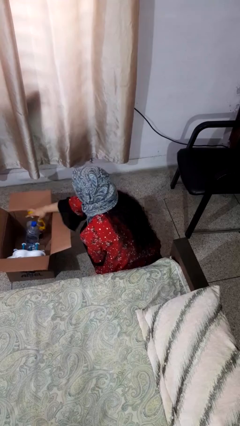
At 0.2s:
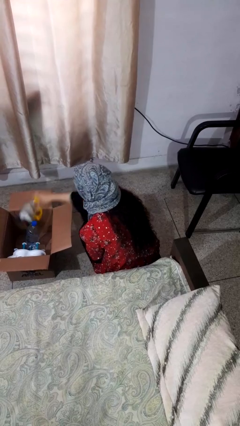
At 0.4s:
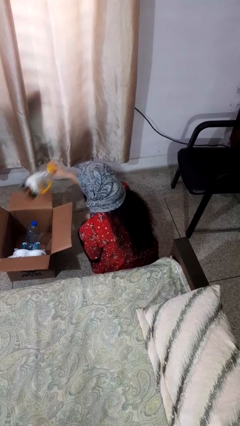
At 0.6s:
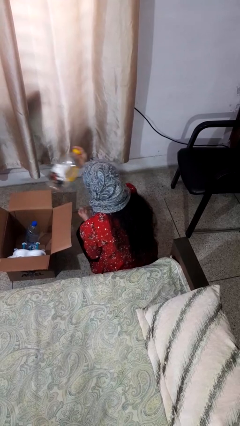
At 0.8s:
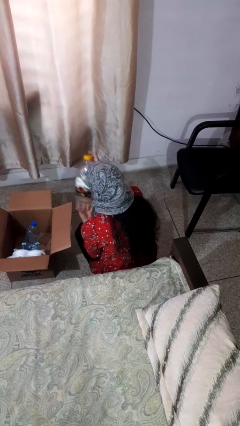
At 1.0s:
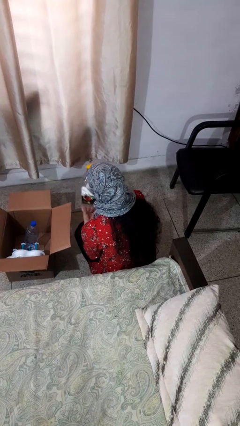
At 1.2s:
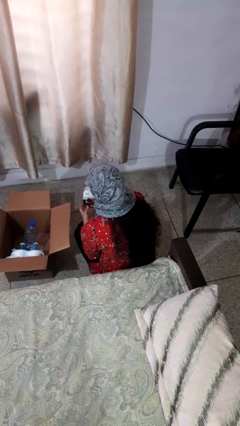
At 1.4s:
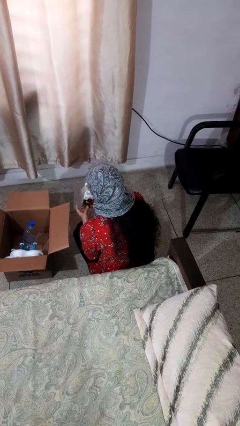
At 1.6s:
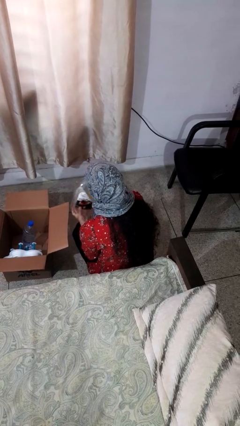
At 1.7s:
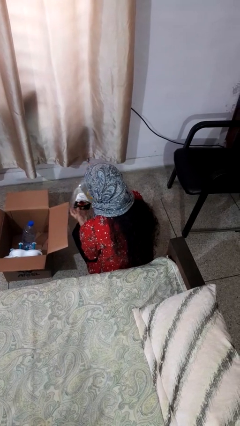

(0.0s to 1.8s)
person takes object from box

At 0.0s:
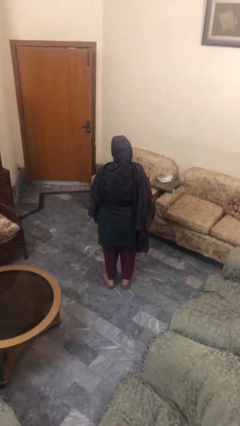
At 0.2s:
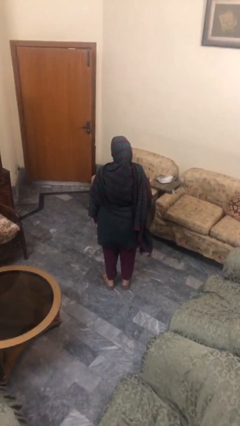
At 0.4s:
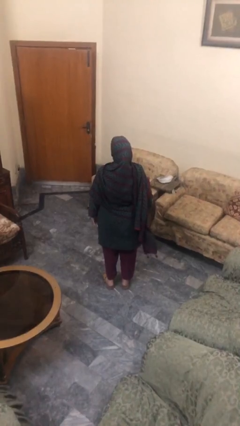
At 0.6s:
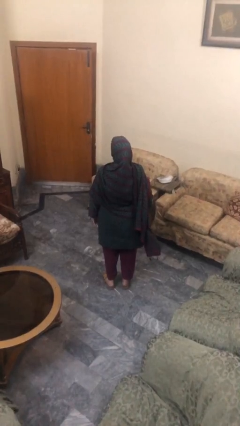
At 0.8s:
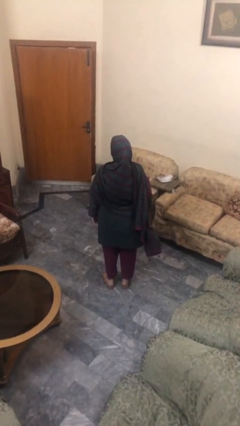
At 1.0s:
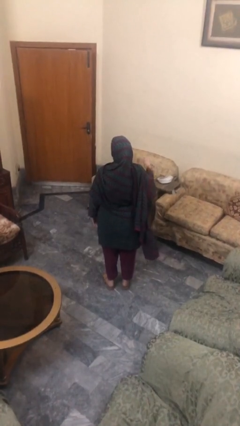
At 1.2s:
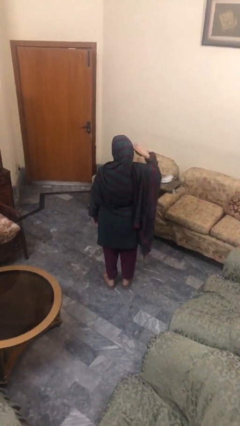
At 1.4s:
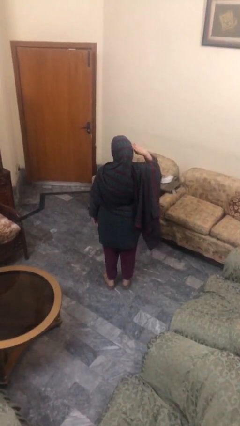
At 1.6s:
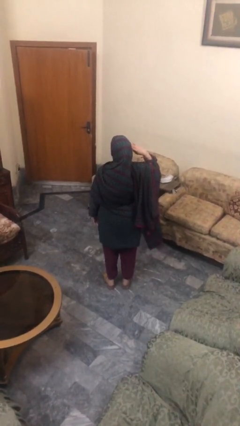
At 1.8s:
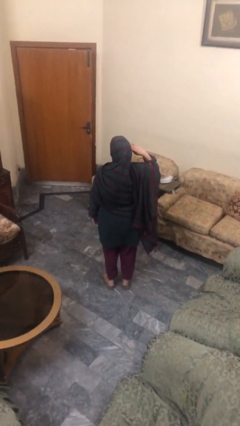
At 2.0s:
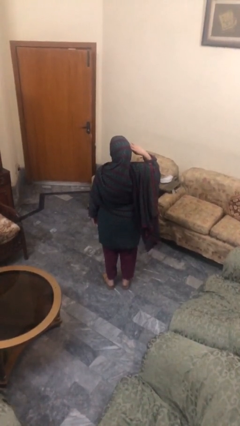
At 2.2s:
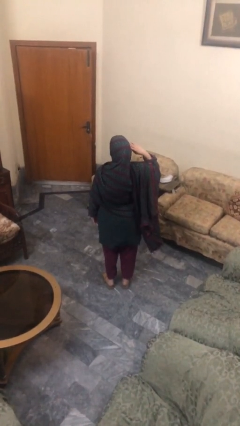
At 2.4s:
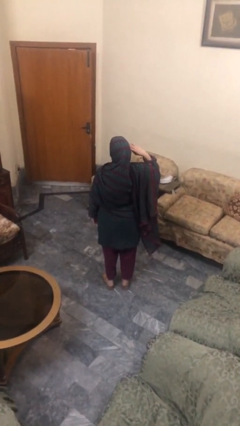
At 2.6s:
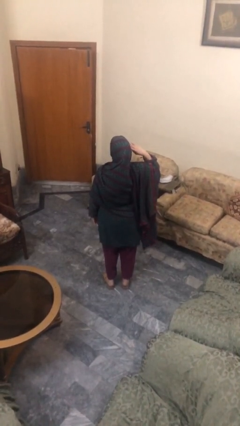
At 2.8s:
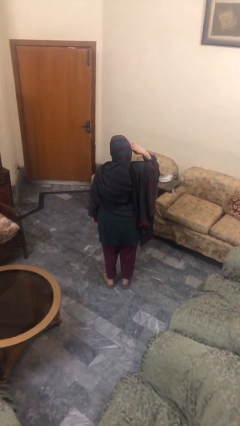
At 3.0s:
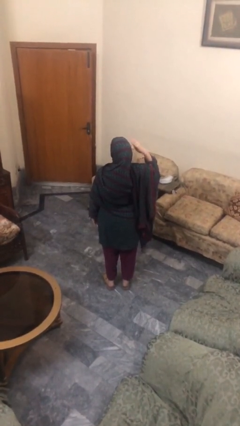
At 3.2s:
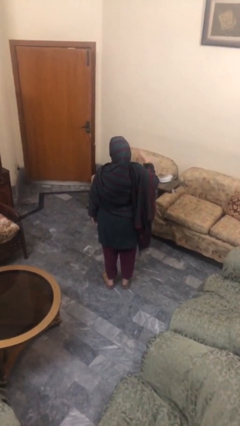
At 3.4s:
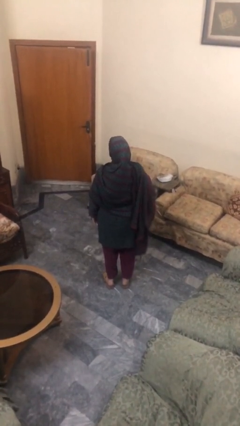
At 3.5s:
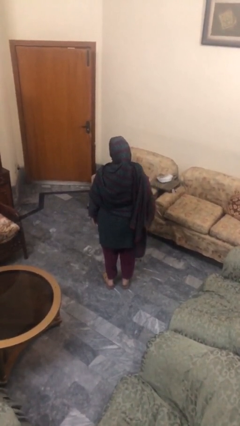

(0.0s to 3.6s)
person salutes

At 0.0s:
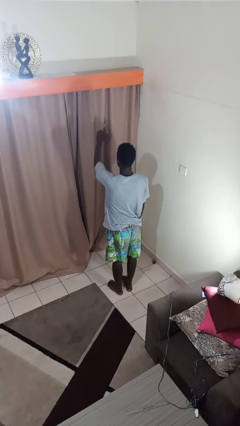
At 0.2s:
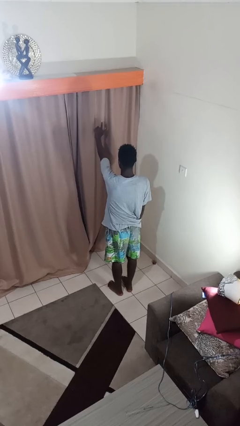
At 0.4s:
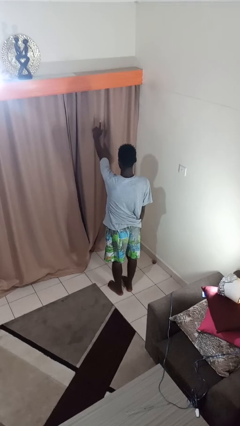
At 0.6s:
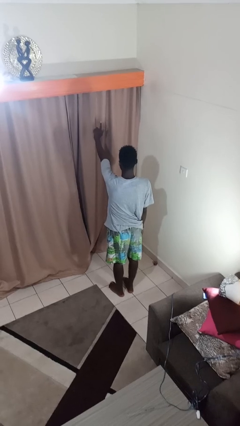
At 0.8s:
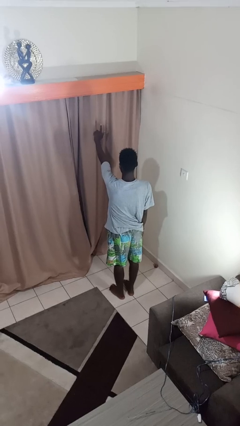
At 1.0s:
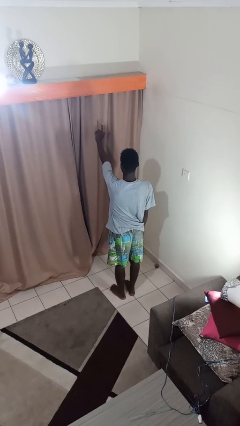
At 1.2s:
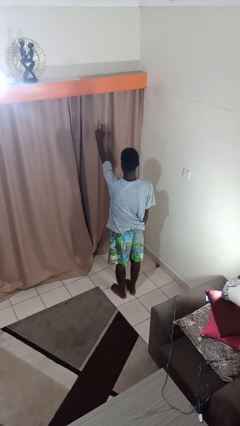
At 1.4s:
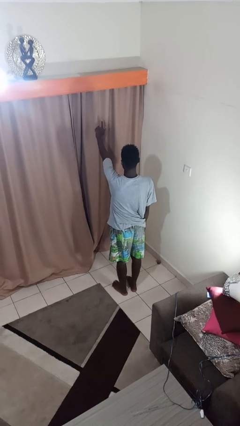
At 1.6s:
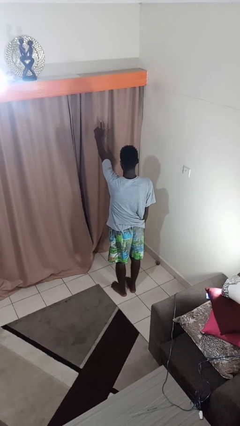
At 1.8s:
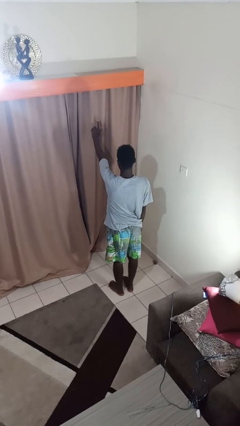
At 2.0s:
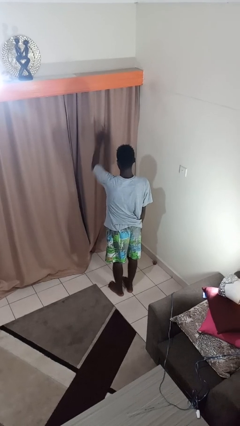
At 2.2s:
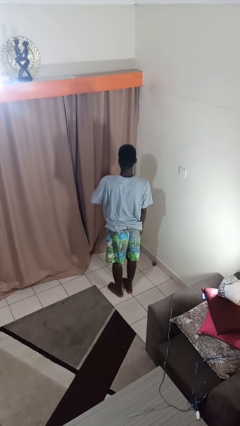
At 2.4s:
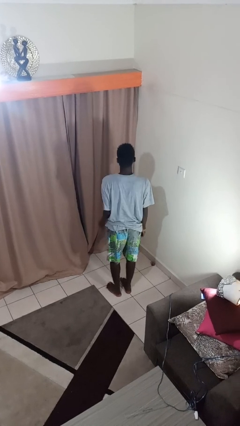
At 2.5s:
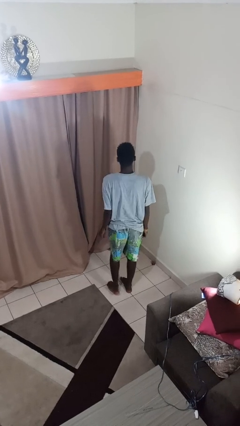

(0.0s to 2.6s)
person gestures number one

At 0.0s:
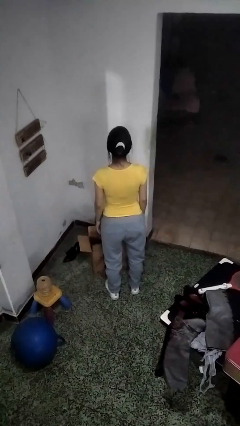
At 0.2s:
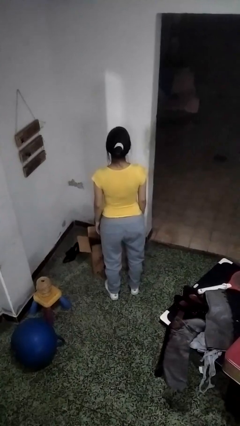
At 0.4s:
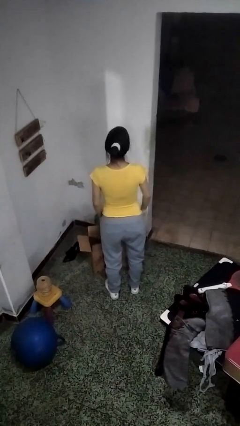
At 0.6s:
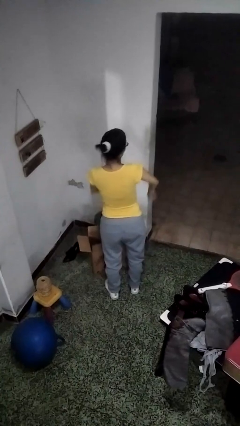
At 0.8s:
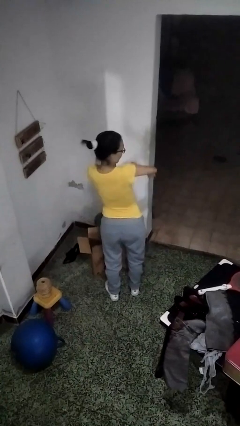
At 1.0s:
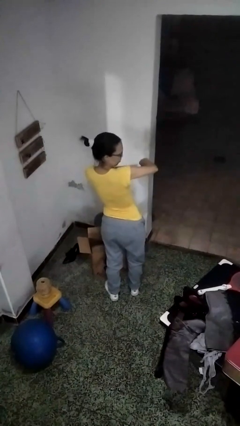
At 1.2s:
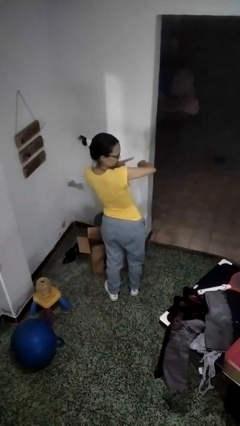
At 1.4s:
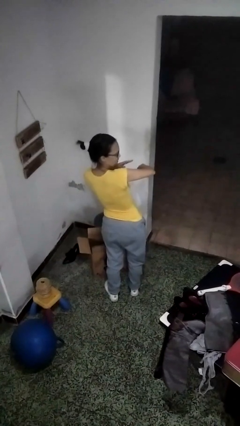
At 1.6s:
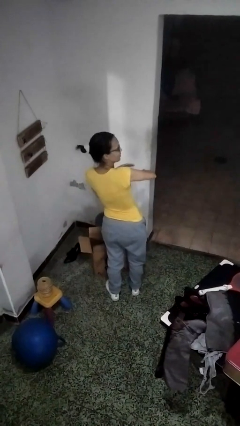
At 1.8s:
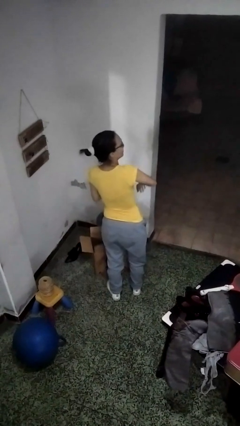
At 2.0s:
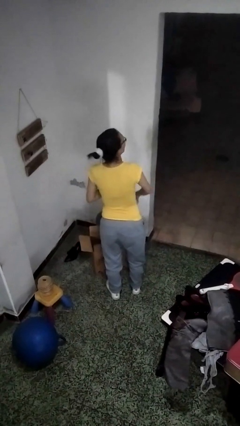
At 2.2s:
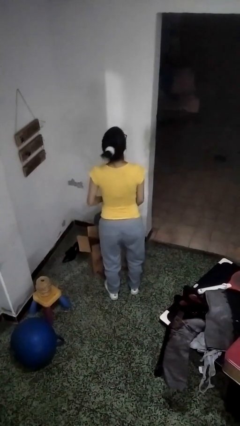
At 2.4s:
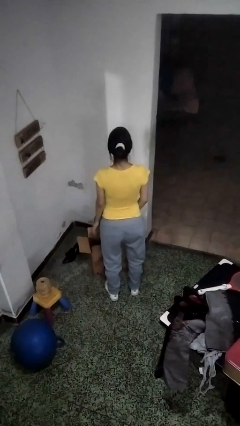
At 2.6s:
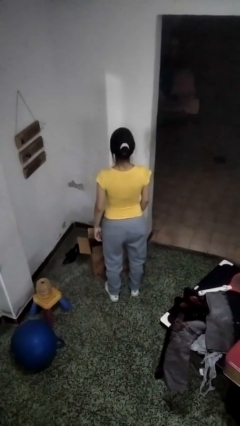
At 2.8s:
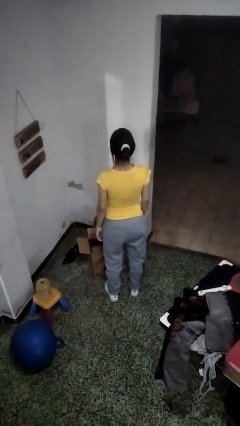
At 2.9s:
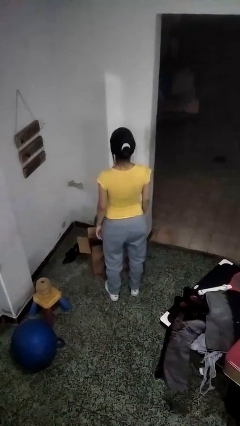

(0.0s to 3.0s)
person swats bug

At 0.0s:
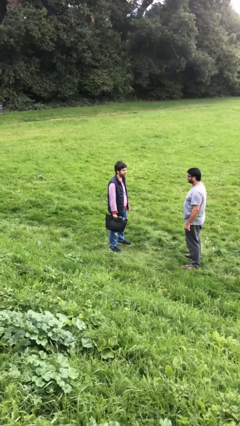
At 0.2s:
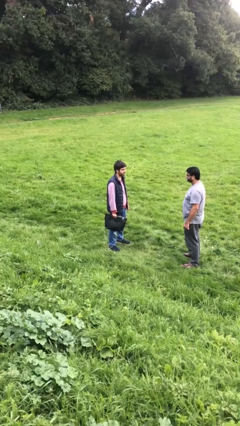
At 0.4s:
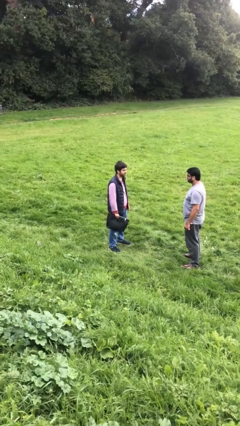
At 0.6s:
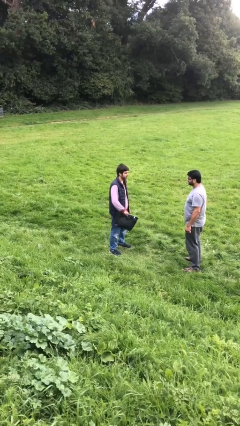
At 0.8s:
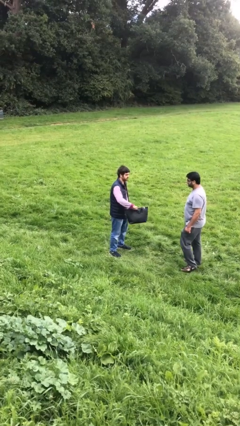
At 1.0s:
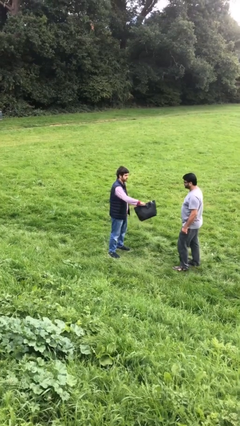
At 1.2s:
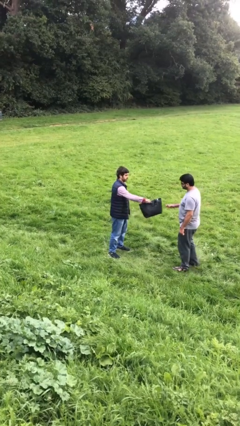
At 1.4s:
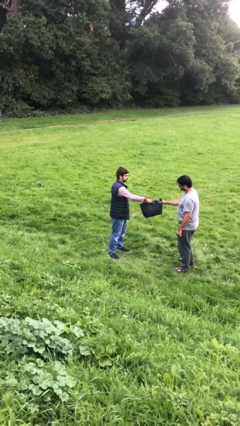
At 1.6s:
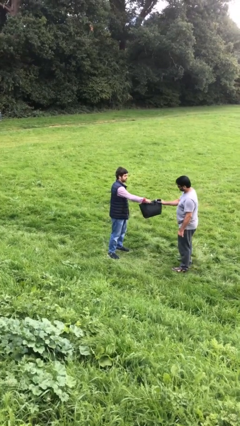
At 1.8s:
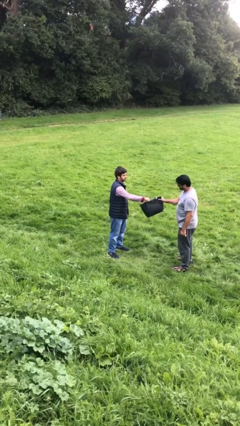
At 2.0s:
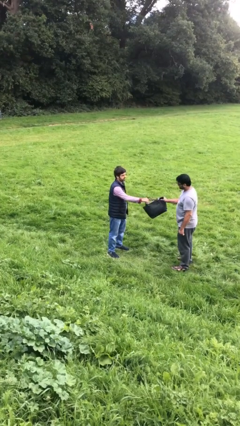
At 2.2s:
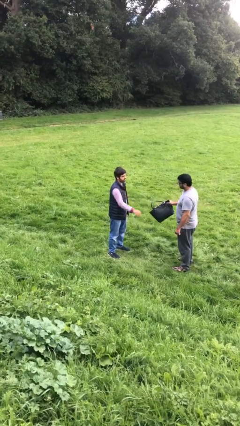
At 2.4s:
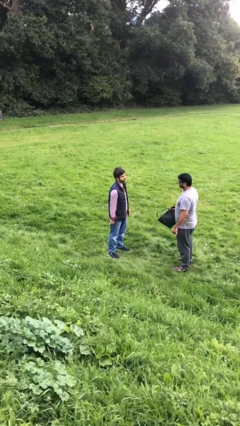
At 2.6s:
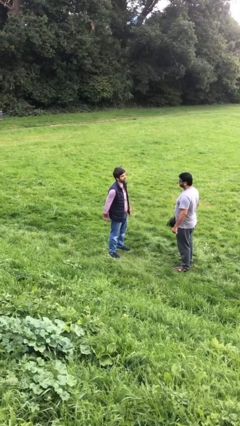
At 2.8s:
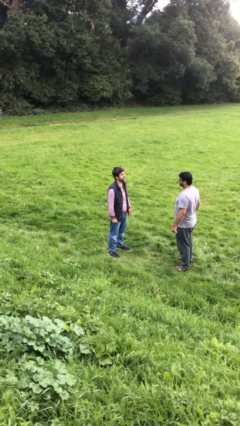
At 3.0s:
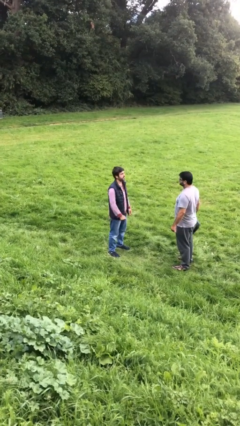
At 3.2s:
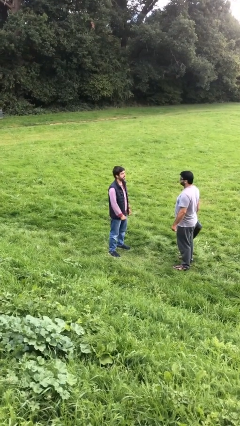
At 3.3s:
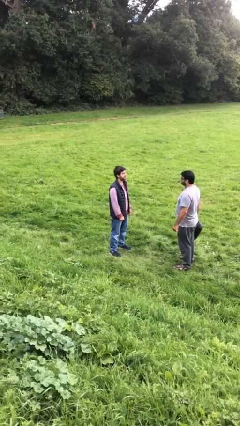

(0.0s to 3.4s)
person transfers object to person

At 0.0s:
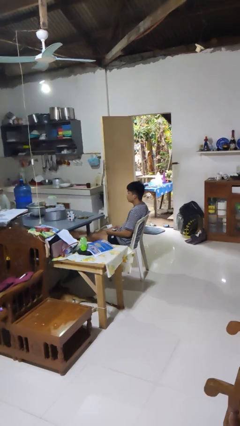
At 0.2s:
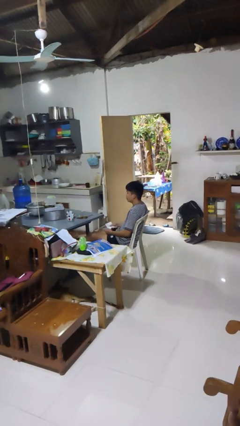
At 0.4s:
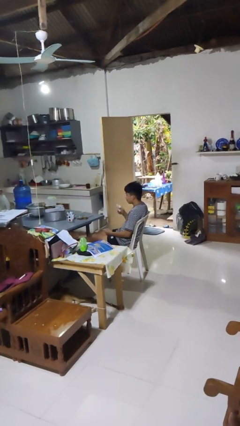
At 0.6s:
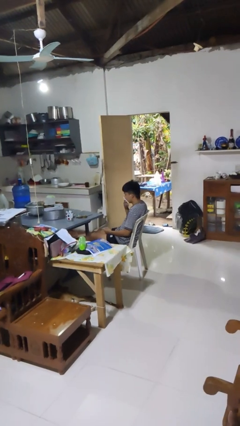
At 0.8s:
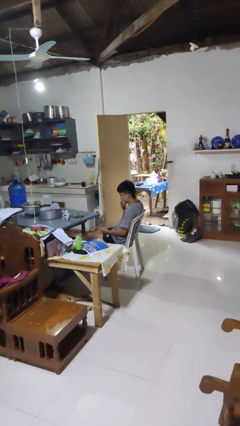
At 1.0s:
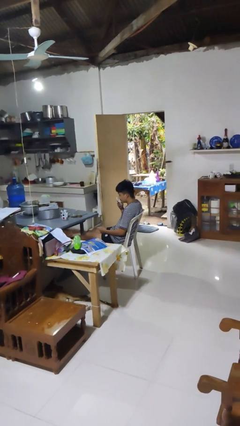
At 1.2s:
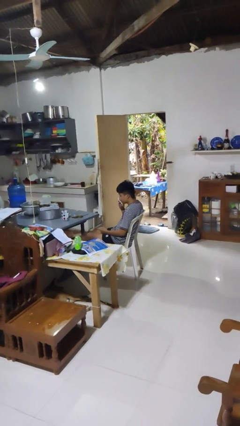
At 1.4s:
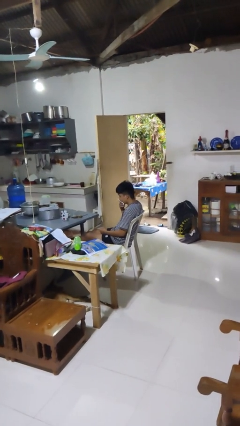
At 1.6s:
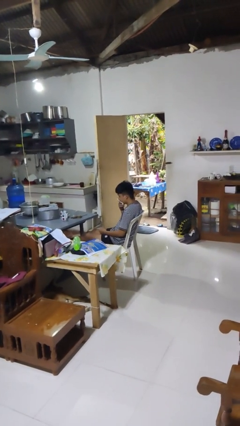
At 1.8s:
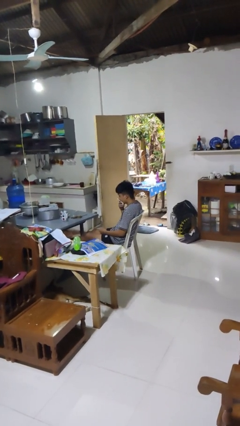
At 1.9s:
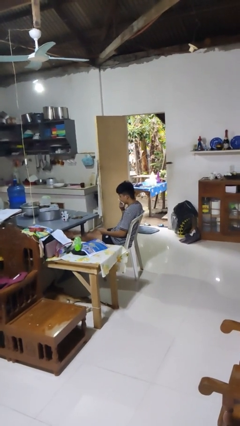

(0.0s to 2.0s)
person wipes mouth with napkin

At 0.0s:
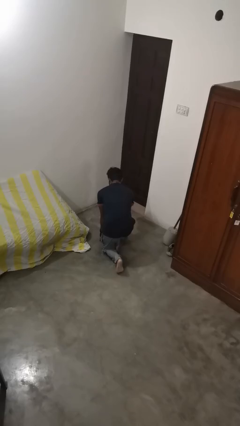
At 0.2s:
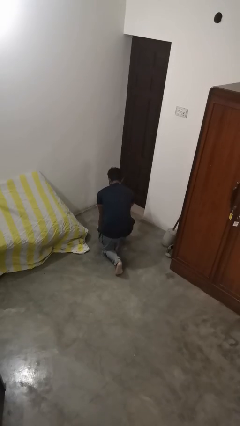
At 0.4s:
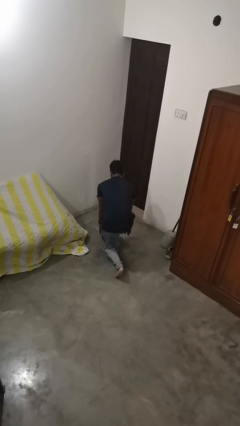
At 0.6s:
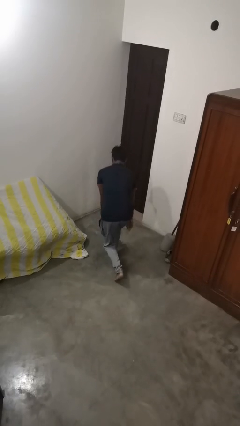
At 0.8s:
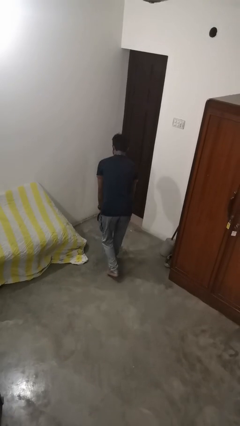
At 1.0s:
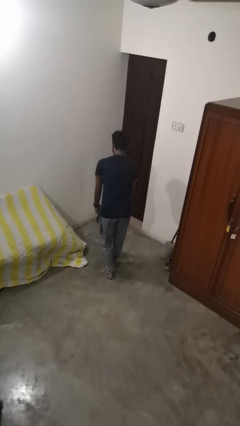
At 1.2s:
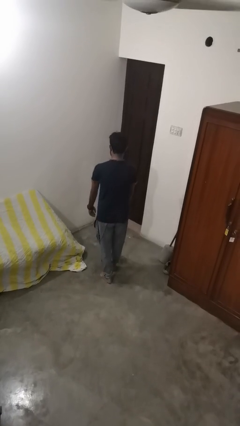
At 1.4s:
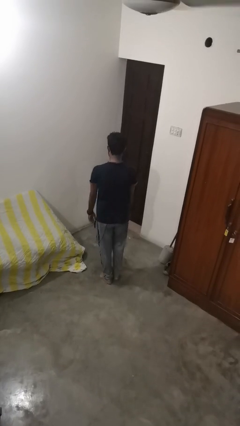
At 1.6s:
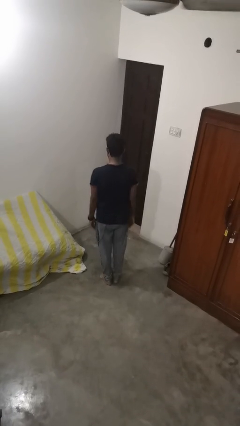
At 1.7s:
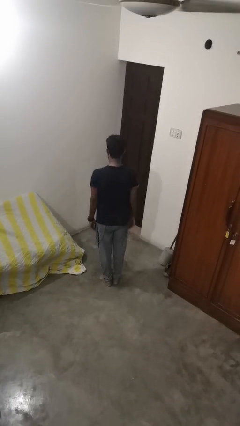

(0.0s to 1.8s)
person stands up from floor
